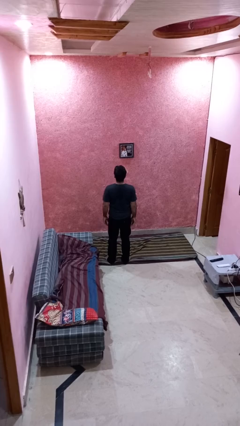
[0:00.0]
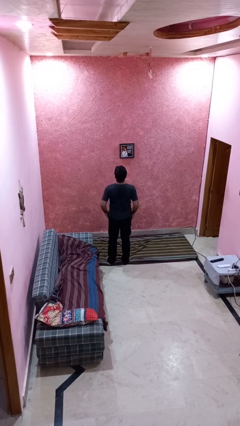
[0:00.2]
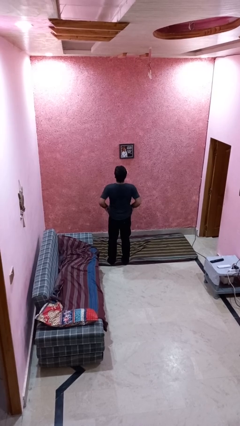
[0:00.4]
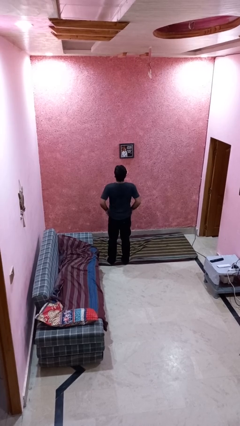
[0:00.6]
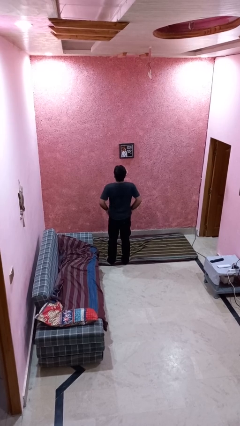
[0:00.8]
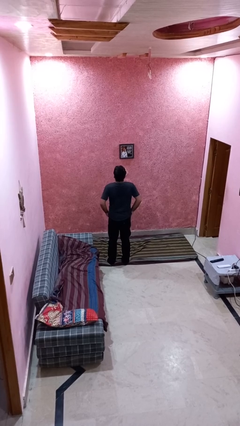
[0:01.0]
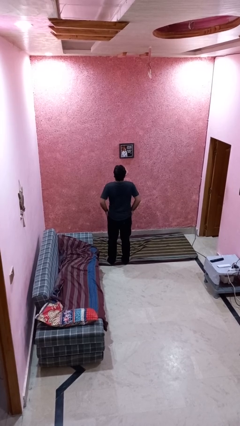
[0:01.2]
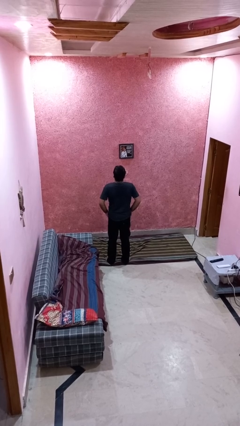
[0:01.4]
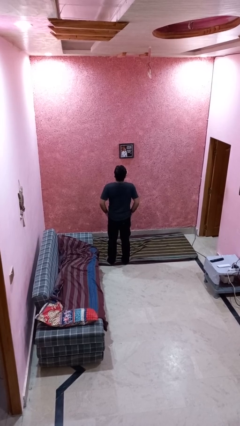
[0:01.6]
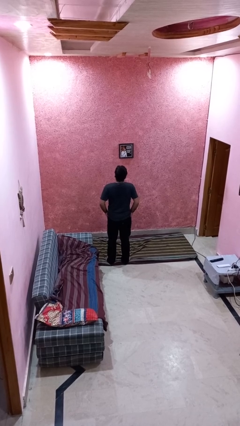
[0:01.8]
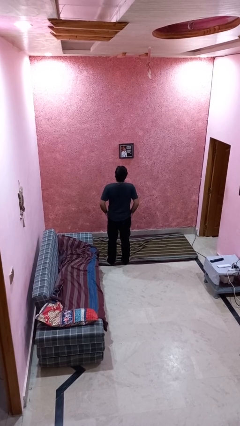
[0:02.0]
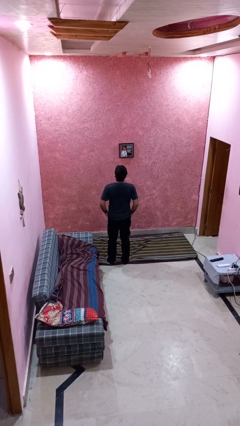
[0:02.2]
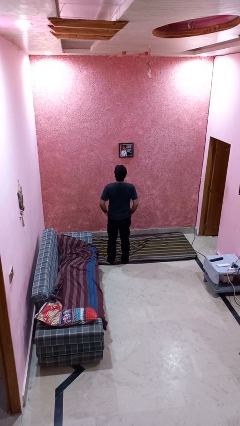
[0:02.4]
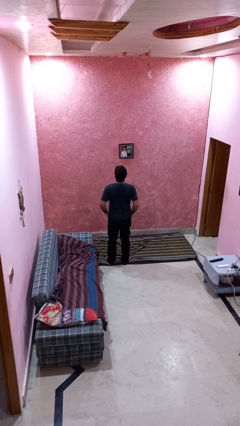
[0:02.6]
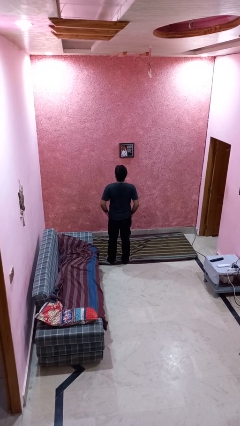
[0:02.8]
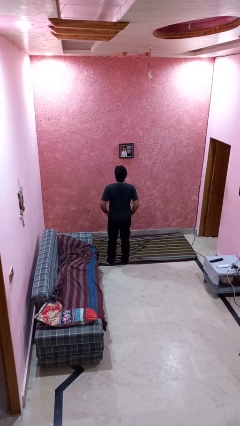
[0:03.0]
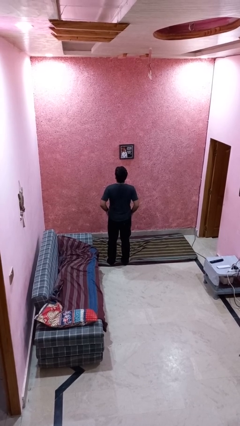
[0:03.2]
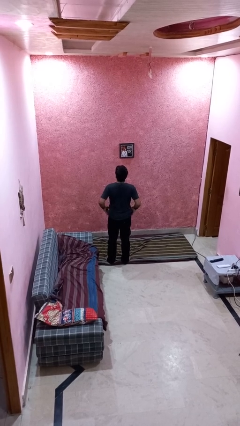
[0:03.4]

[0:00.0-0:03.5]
person puts hands in back pockets

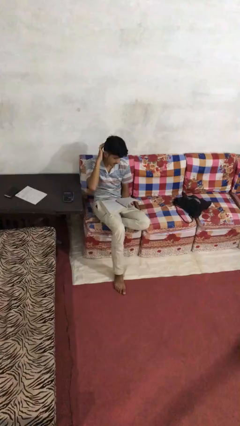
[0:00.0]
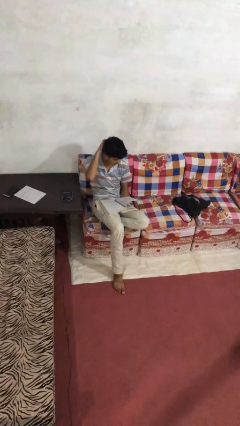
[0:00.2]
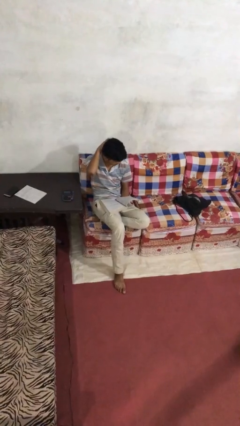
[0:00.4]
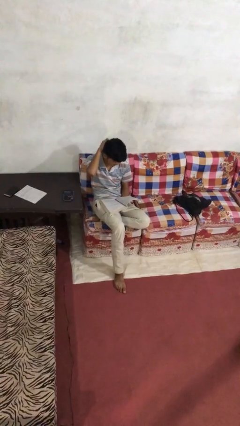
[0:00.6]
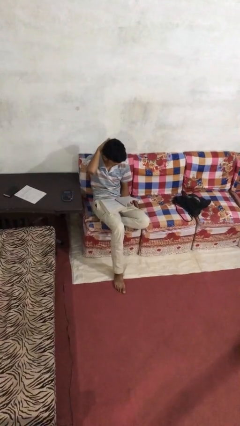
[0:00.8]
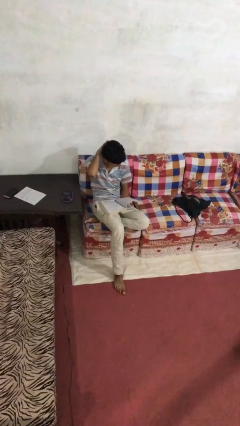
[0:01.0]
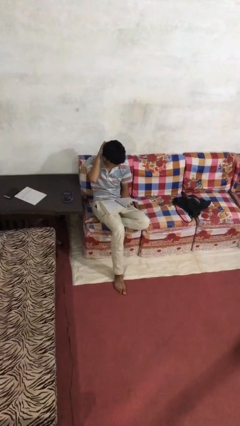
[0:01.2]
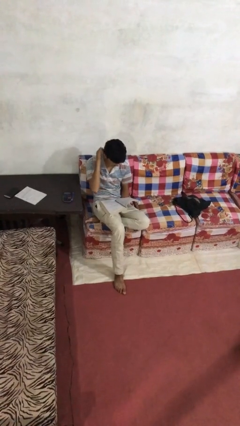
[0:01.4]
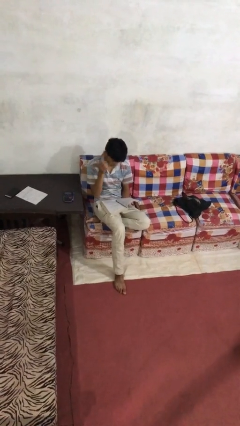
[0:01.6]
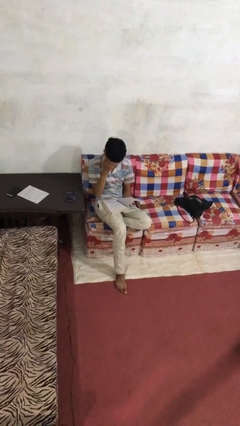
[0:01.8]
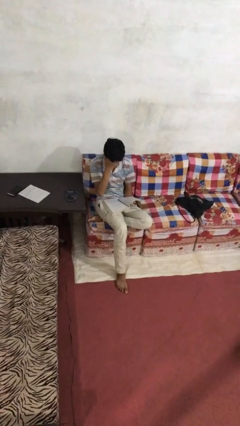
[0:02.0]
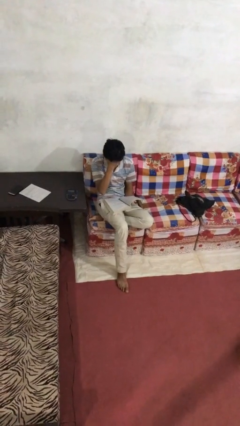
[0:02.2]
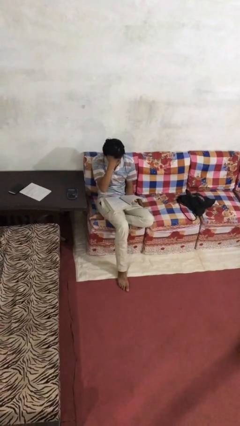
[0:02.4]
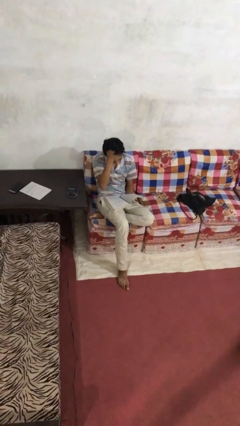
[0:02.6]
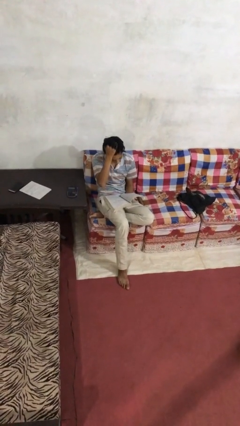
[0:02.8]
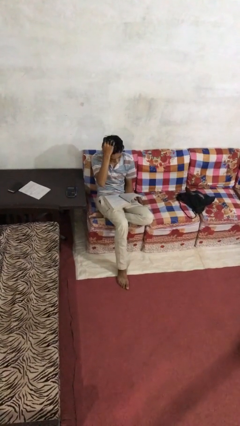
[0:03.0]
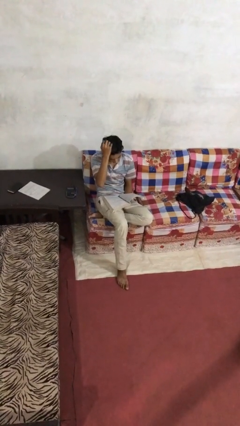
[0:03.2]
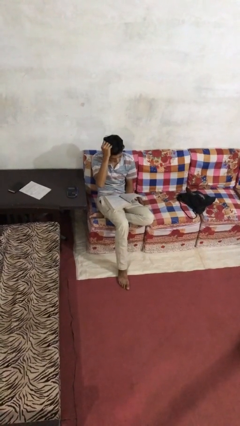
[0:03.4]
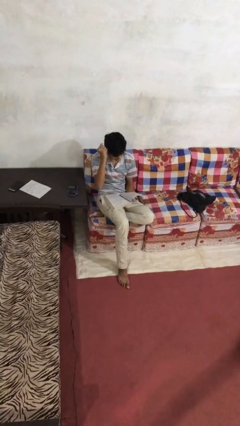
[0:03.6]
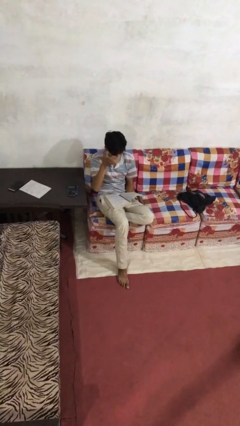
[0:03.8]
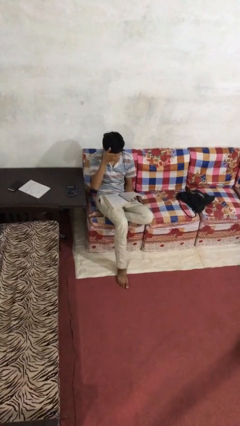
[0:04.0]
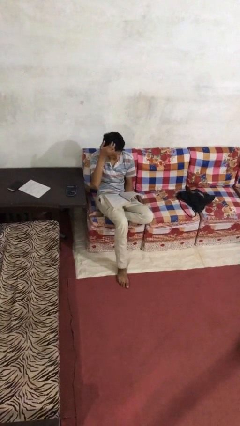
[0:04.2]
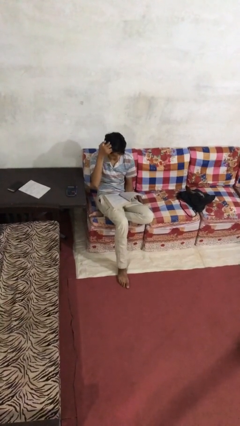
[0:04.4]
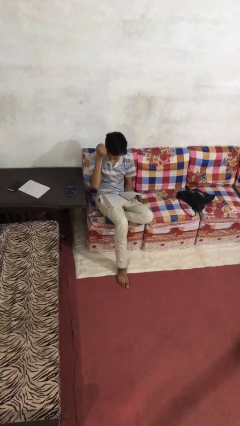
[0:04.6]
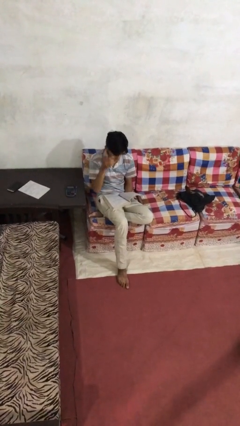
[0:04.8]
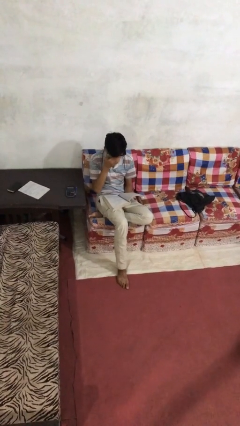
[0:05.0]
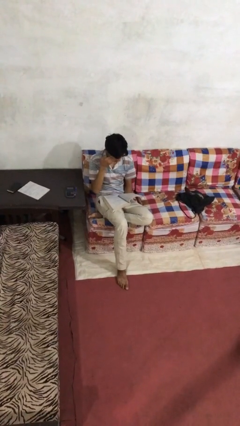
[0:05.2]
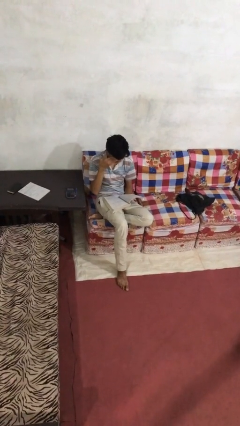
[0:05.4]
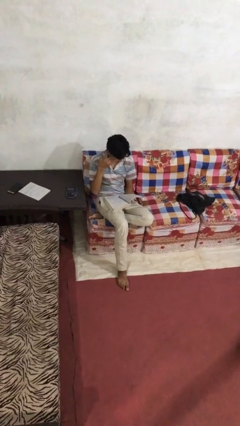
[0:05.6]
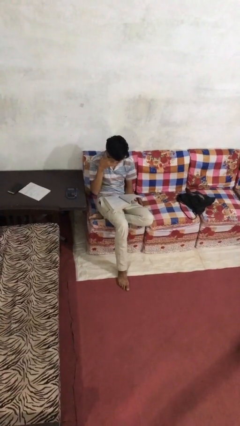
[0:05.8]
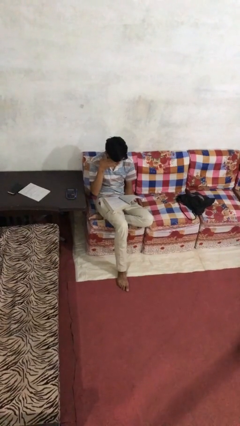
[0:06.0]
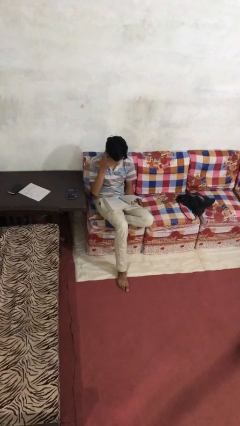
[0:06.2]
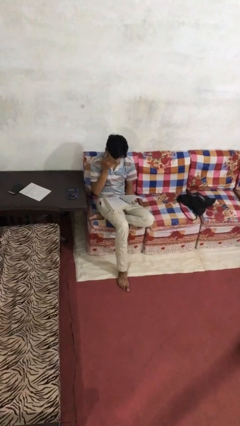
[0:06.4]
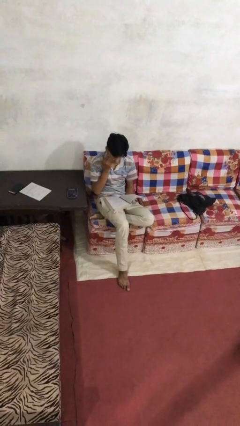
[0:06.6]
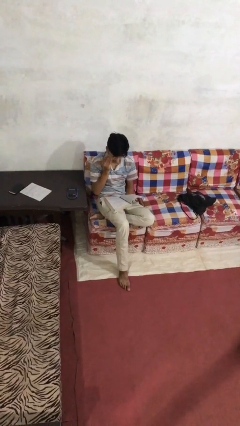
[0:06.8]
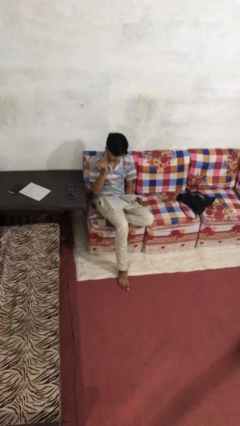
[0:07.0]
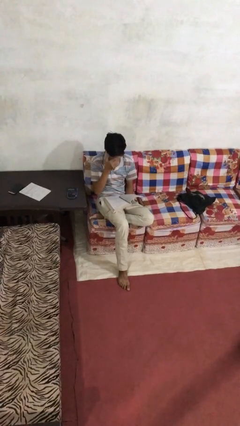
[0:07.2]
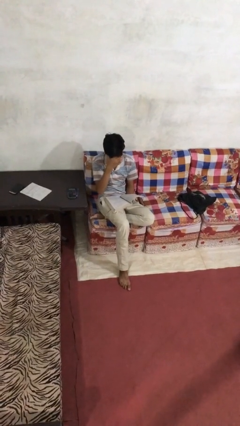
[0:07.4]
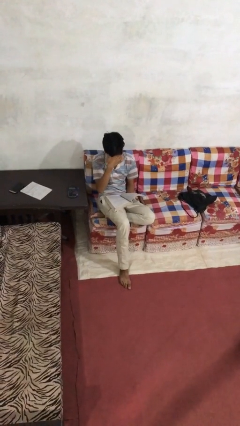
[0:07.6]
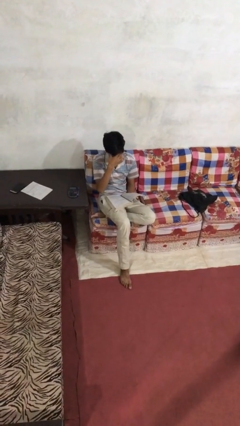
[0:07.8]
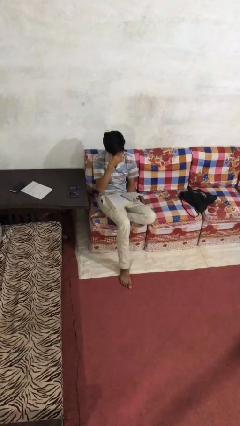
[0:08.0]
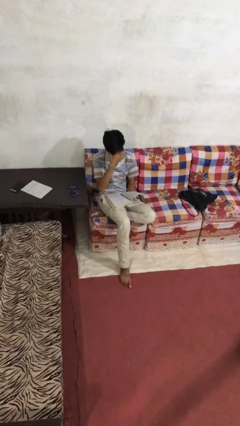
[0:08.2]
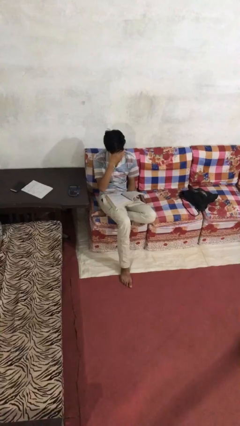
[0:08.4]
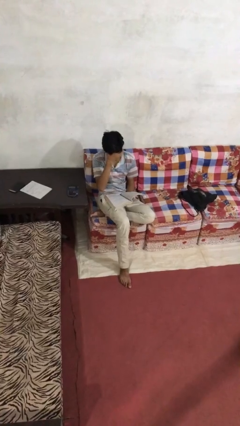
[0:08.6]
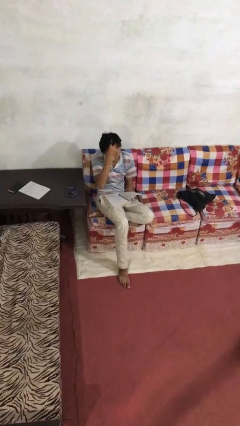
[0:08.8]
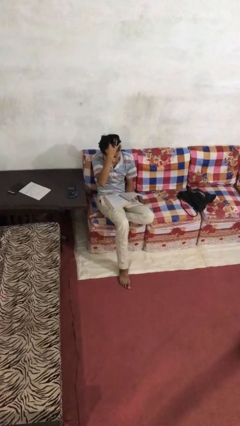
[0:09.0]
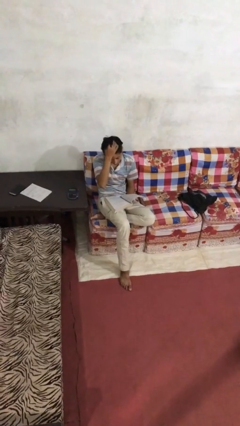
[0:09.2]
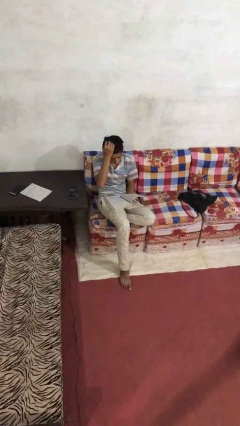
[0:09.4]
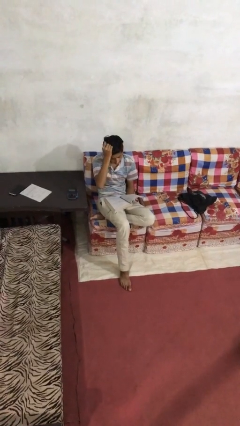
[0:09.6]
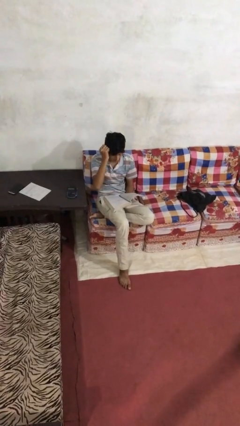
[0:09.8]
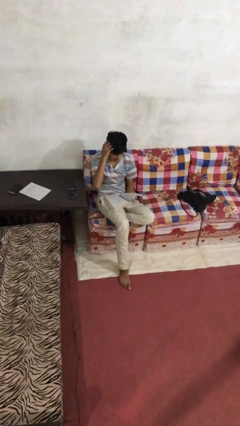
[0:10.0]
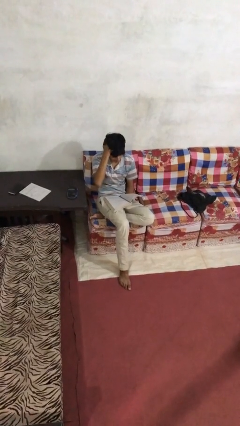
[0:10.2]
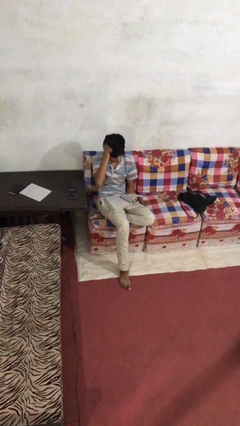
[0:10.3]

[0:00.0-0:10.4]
person reads document

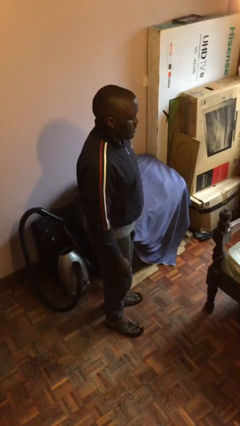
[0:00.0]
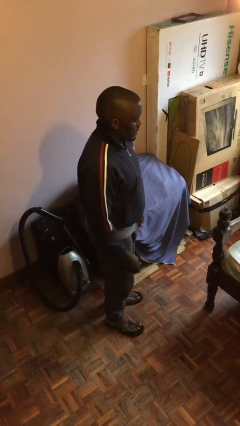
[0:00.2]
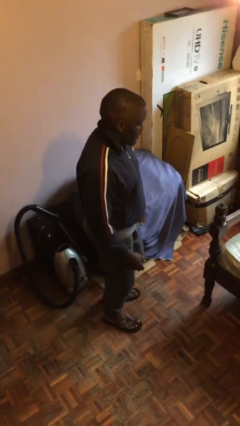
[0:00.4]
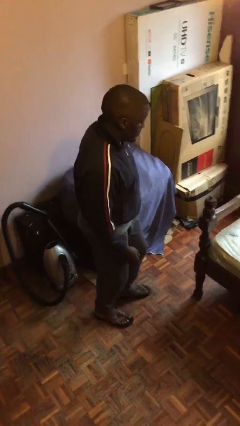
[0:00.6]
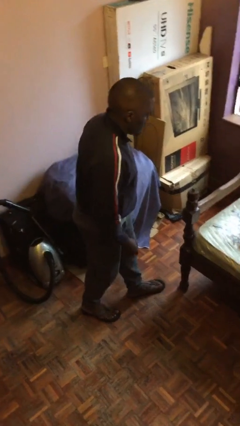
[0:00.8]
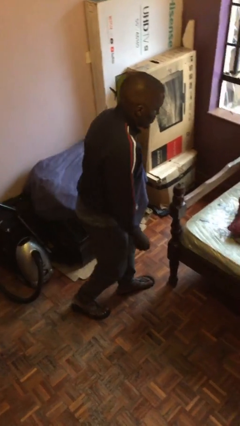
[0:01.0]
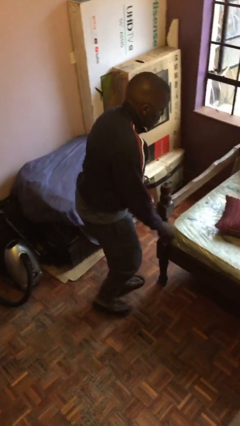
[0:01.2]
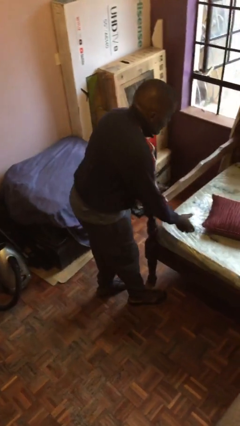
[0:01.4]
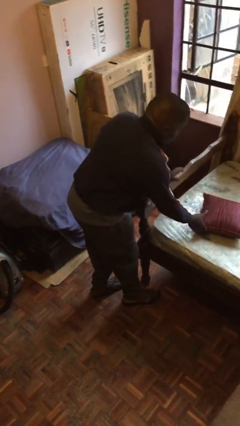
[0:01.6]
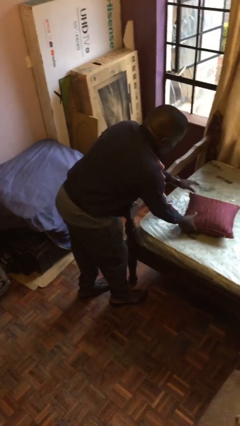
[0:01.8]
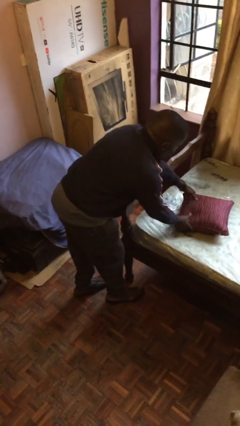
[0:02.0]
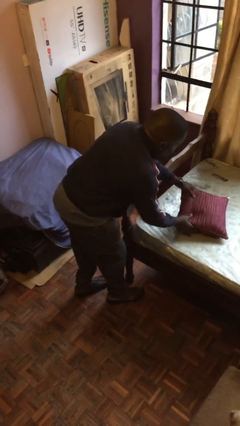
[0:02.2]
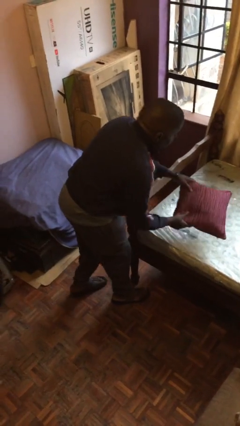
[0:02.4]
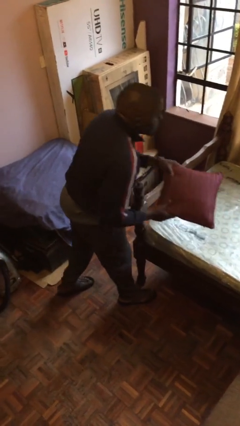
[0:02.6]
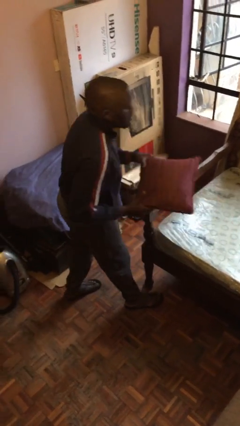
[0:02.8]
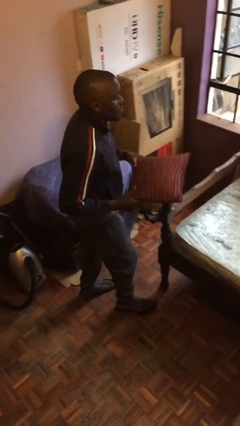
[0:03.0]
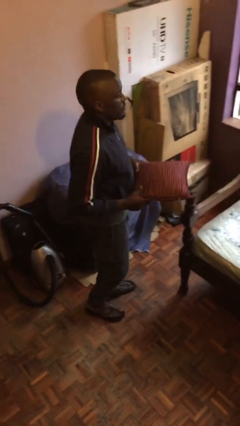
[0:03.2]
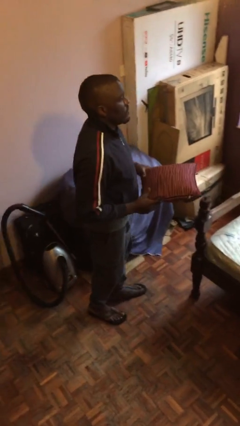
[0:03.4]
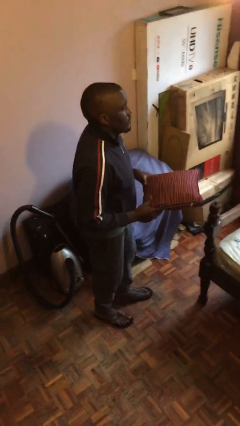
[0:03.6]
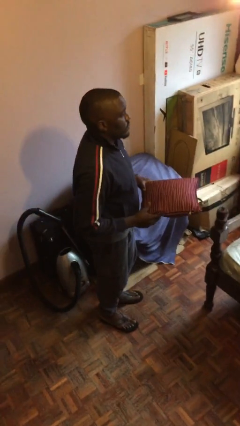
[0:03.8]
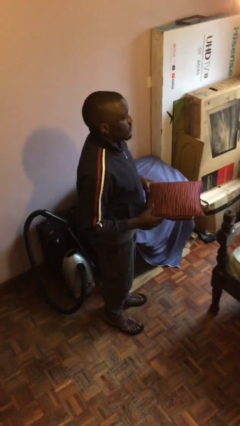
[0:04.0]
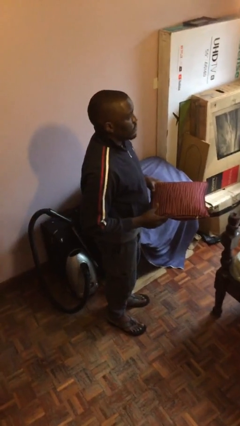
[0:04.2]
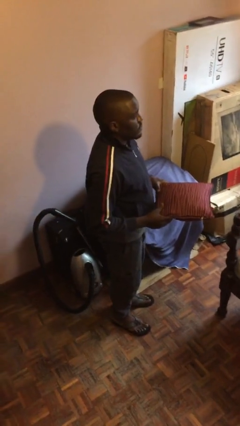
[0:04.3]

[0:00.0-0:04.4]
person picks up object from bed
